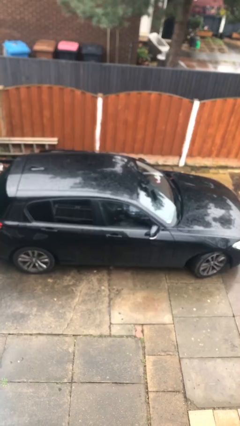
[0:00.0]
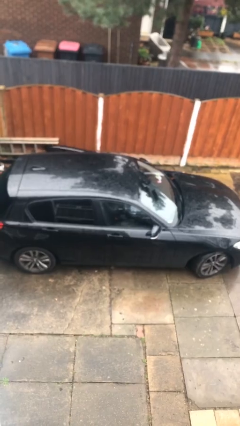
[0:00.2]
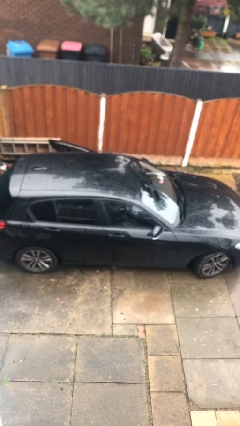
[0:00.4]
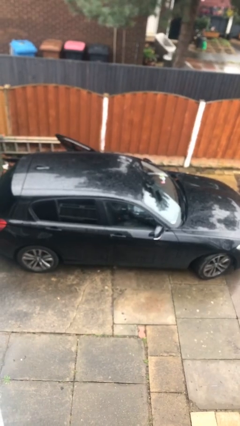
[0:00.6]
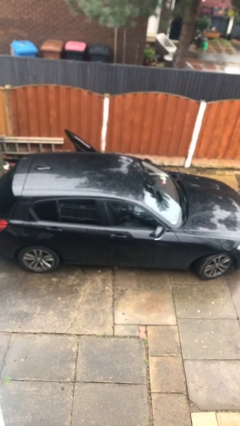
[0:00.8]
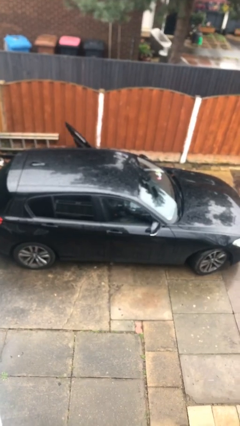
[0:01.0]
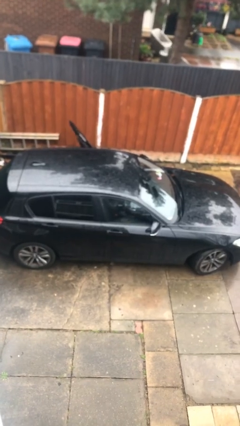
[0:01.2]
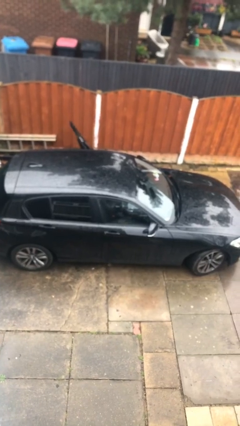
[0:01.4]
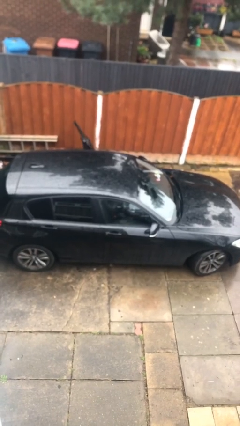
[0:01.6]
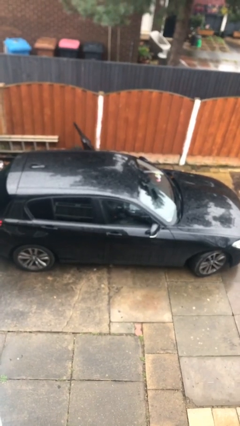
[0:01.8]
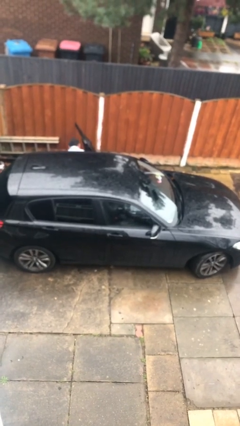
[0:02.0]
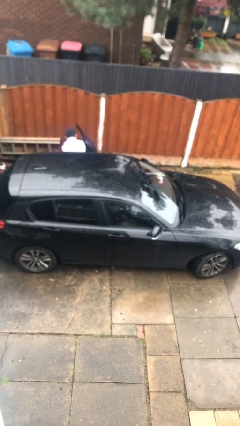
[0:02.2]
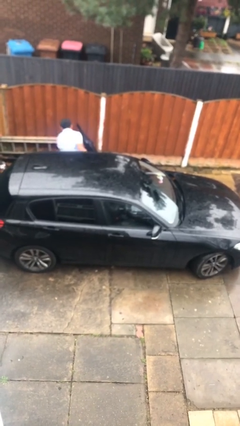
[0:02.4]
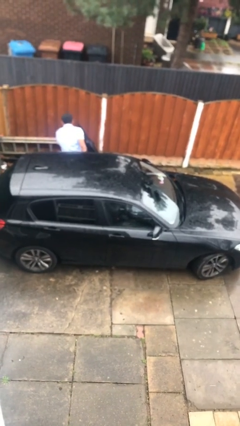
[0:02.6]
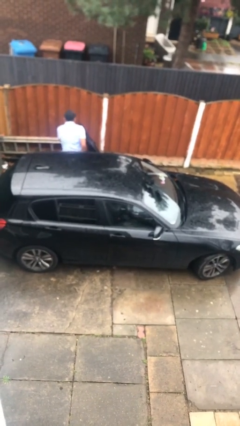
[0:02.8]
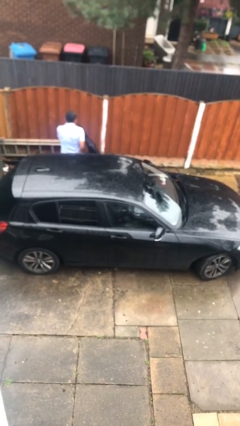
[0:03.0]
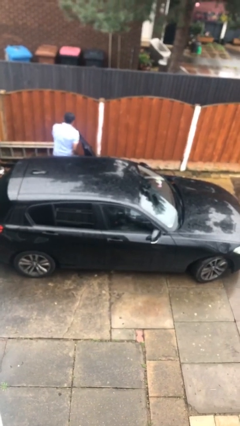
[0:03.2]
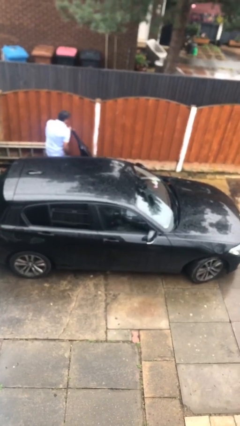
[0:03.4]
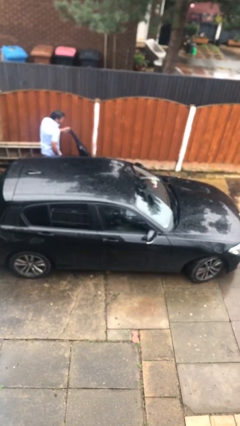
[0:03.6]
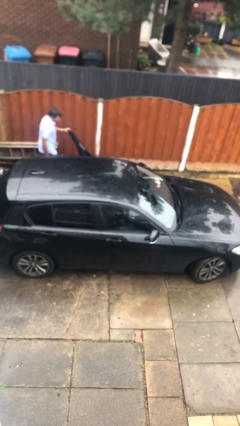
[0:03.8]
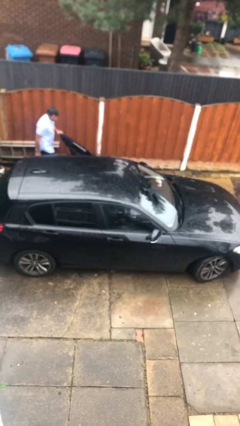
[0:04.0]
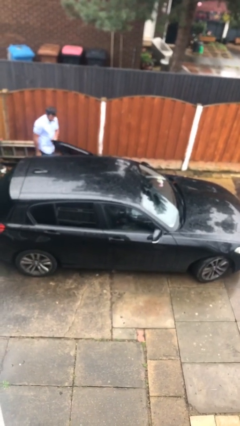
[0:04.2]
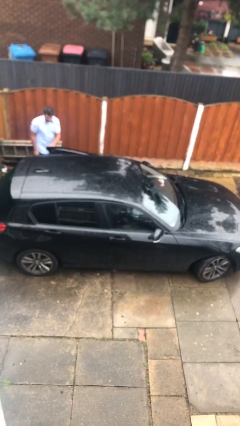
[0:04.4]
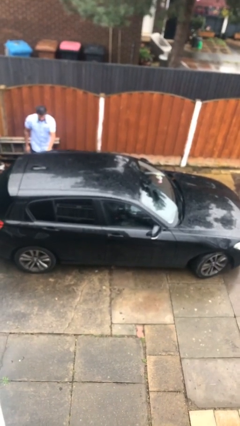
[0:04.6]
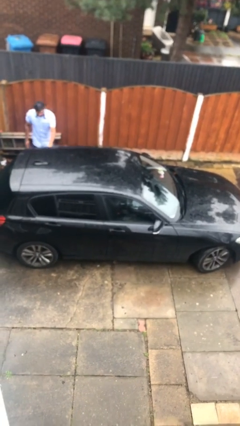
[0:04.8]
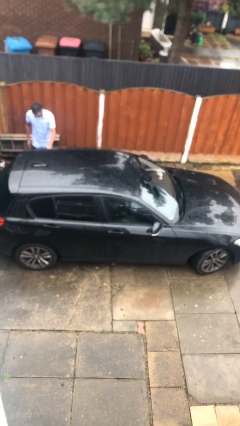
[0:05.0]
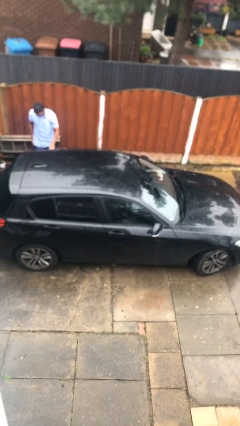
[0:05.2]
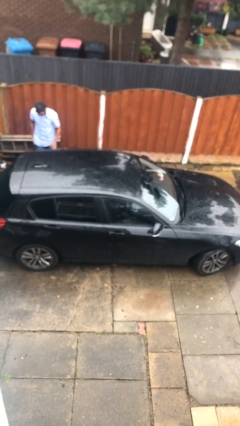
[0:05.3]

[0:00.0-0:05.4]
car drops off person

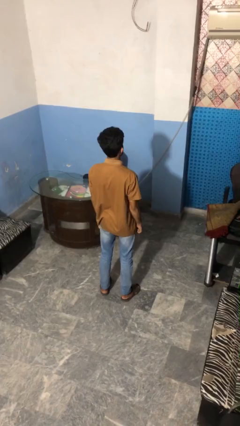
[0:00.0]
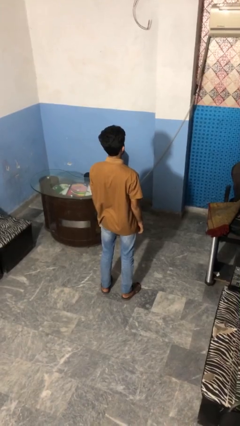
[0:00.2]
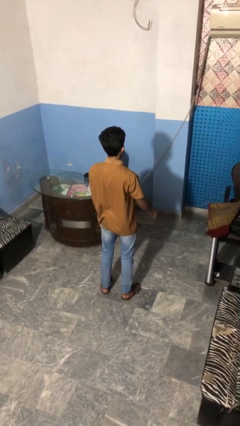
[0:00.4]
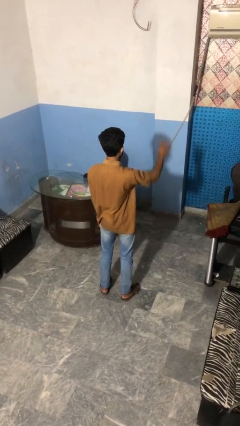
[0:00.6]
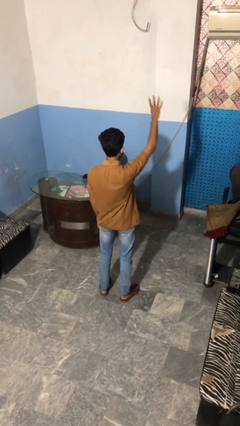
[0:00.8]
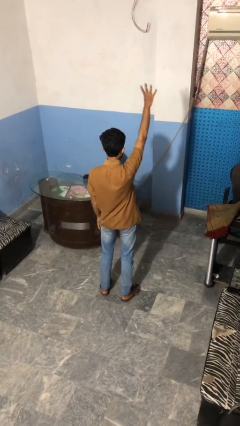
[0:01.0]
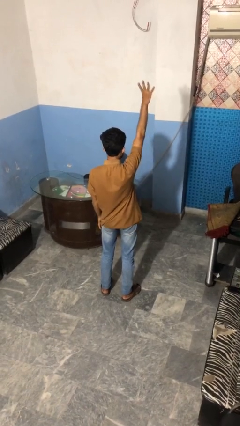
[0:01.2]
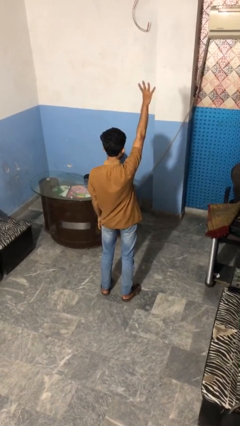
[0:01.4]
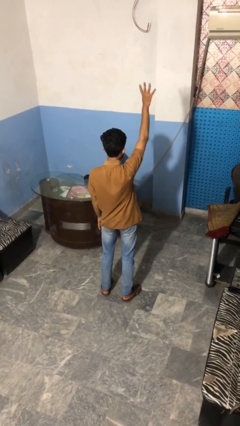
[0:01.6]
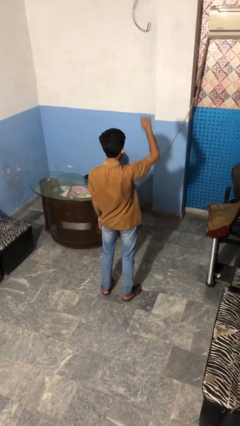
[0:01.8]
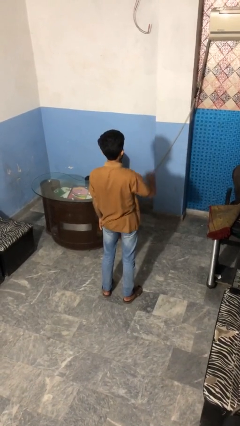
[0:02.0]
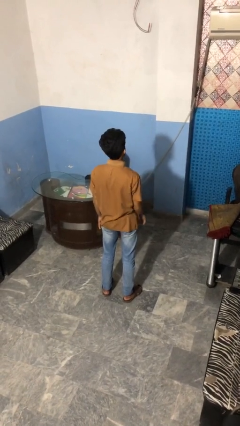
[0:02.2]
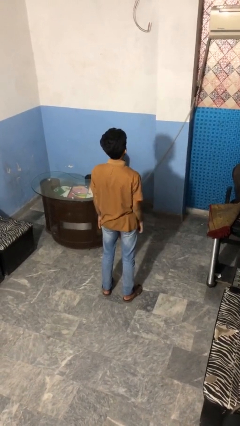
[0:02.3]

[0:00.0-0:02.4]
person gestures number four

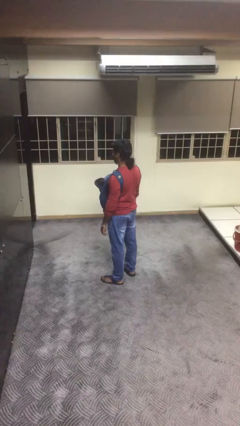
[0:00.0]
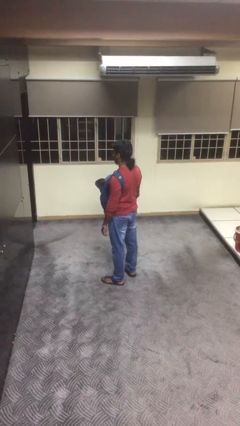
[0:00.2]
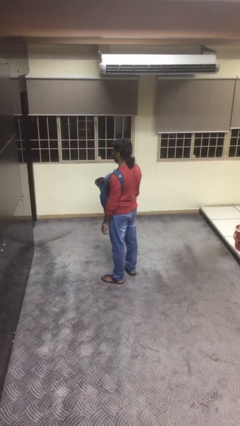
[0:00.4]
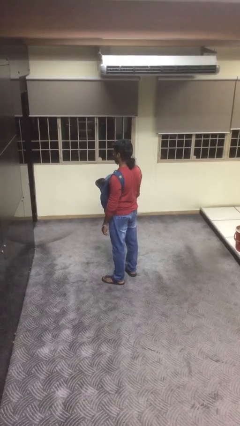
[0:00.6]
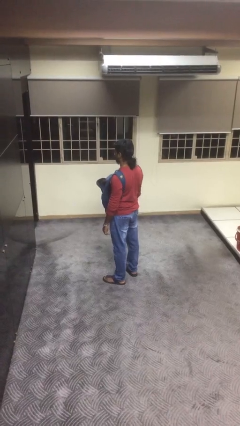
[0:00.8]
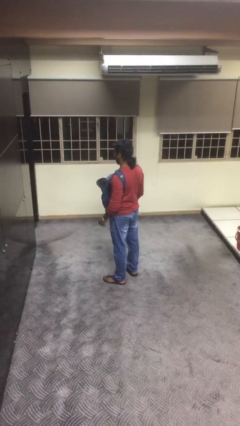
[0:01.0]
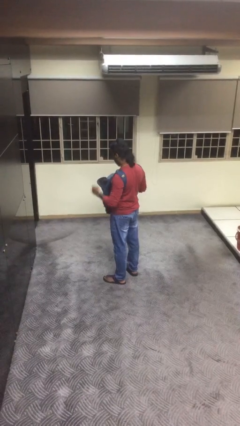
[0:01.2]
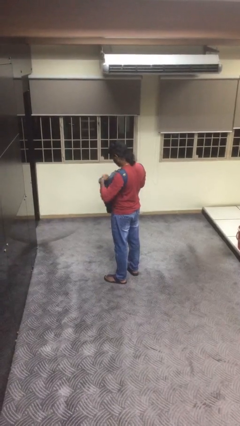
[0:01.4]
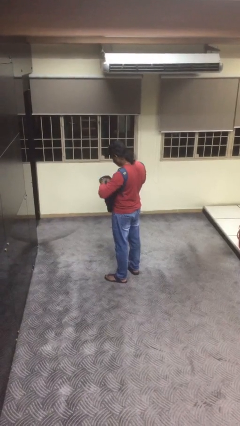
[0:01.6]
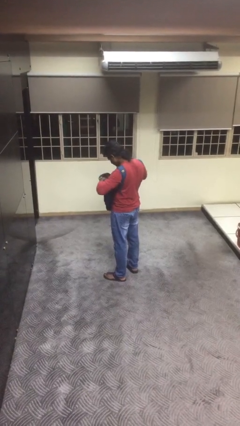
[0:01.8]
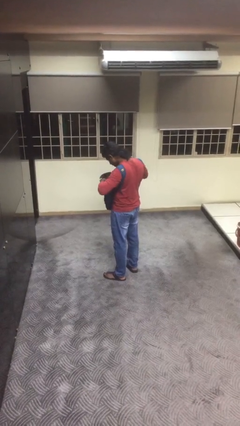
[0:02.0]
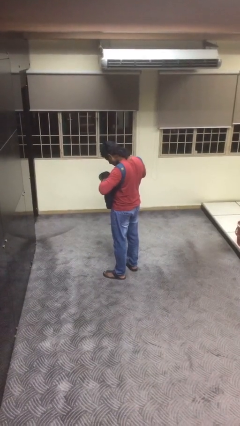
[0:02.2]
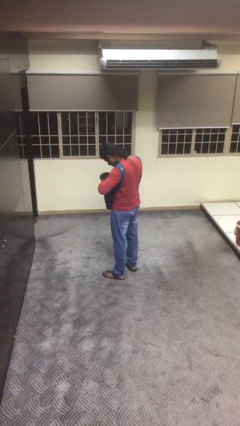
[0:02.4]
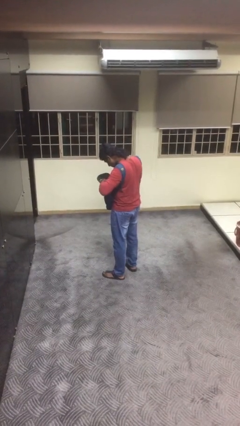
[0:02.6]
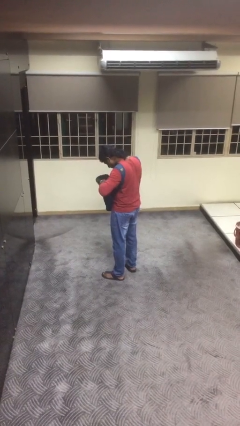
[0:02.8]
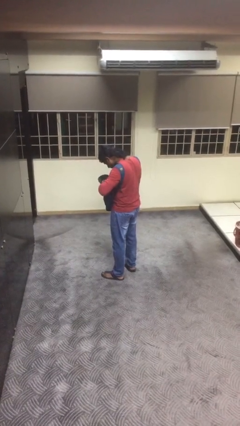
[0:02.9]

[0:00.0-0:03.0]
person searches in backpack

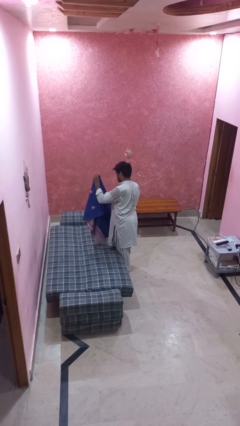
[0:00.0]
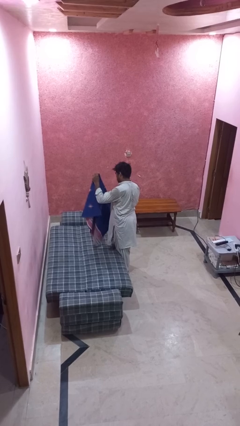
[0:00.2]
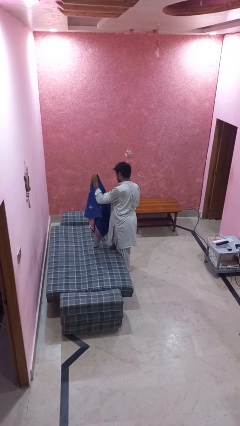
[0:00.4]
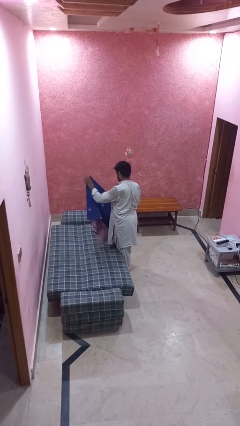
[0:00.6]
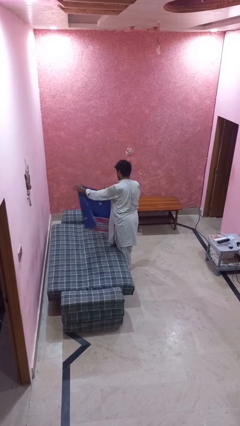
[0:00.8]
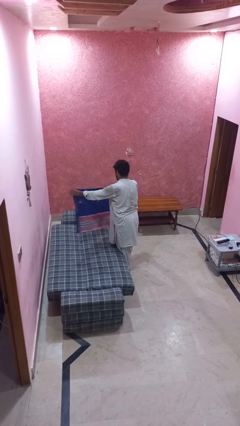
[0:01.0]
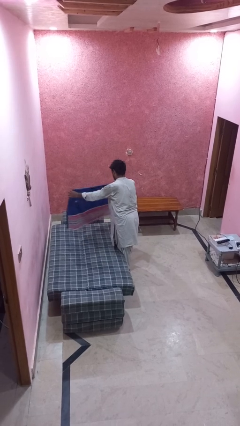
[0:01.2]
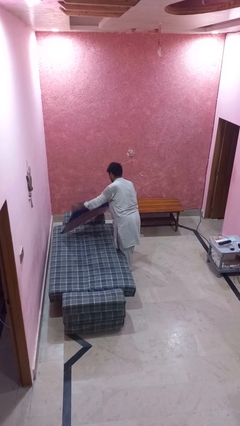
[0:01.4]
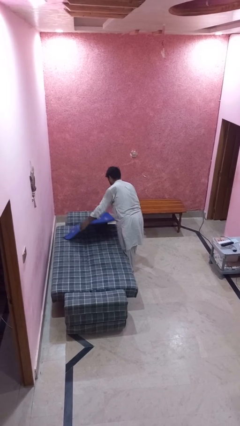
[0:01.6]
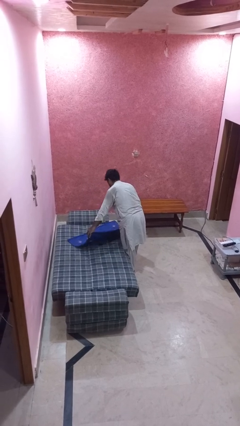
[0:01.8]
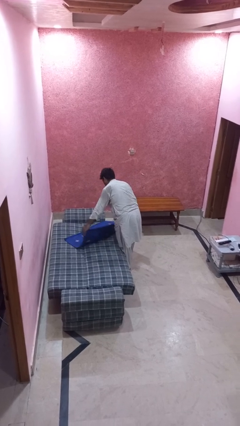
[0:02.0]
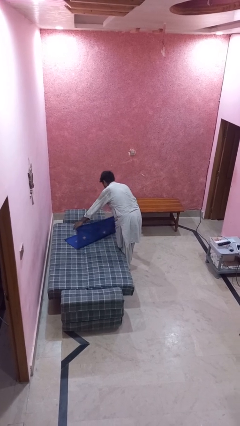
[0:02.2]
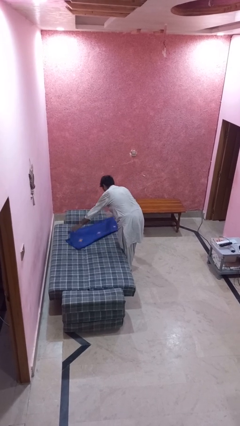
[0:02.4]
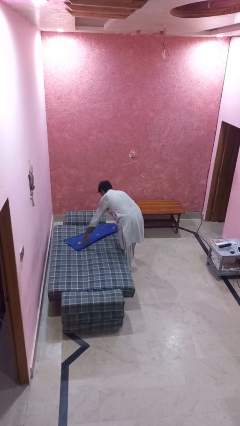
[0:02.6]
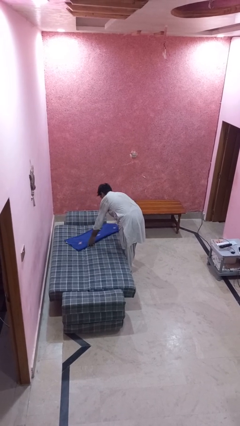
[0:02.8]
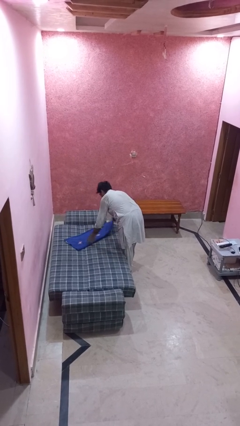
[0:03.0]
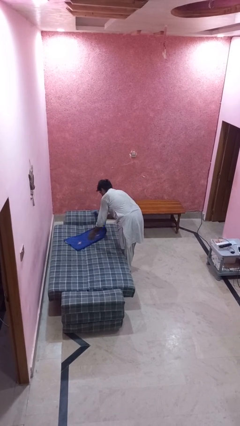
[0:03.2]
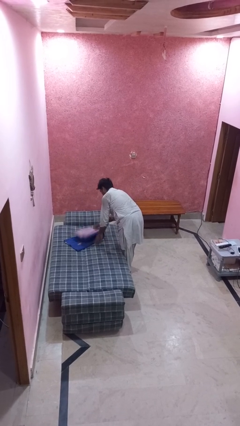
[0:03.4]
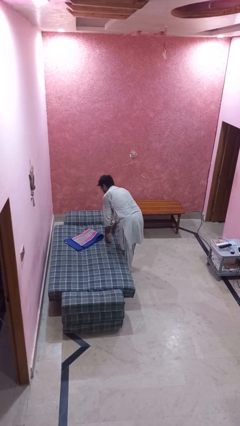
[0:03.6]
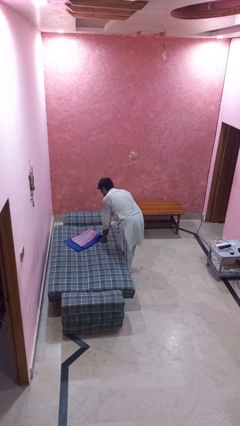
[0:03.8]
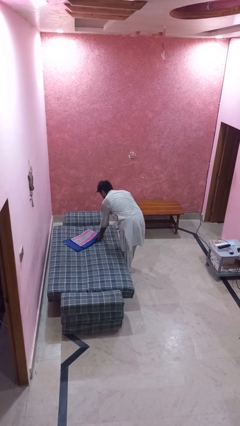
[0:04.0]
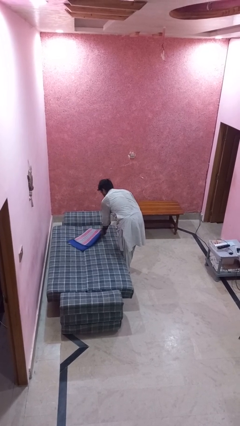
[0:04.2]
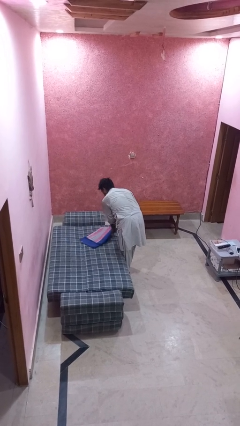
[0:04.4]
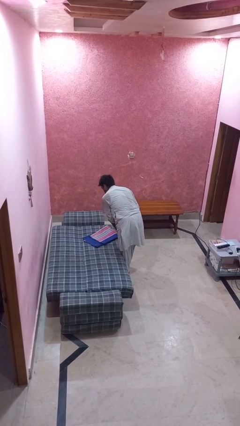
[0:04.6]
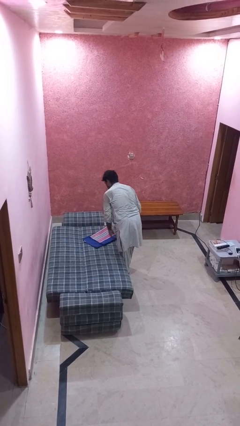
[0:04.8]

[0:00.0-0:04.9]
person folds blanket

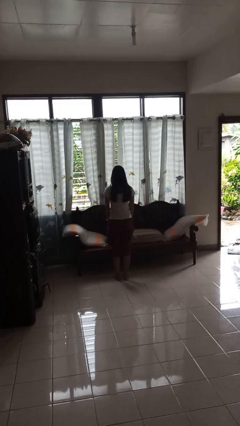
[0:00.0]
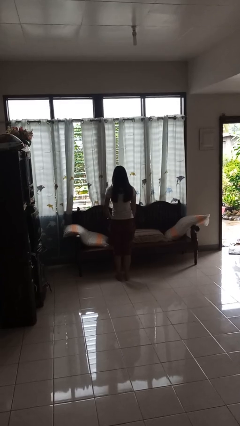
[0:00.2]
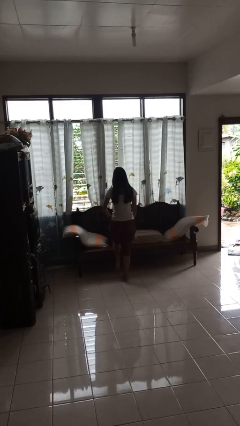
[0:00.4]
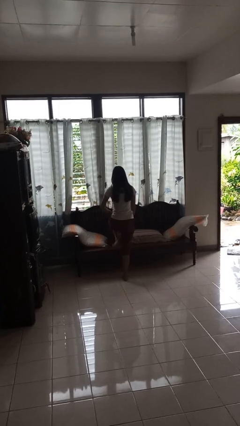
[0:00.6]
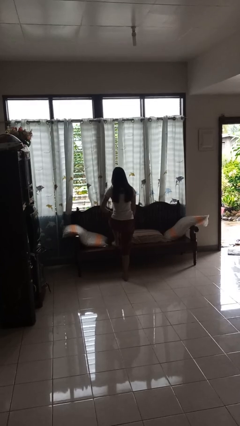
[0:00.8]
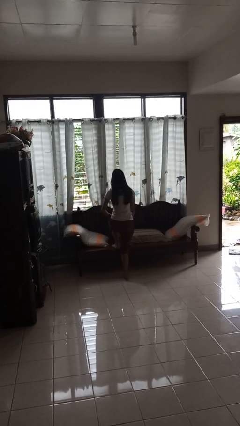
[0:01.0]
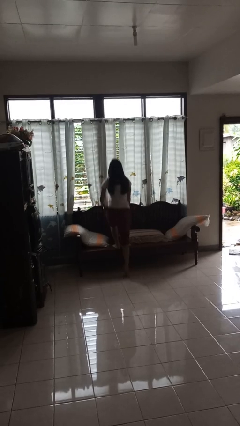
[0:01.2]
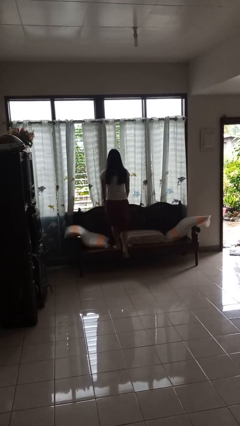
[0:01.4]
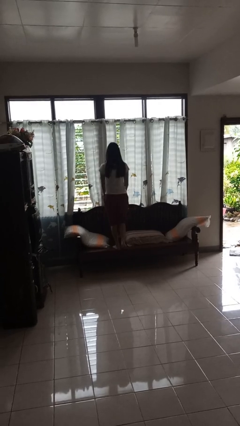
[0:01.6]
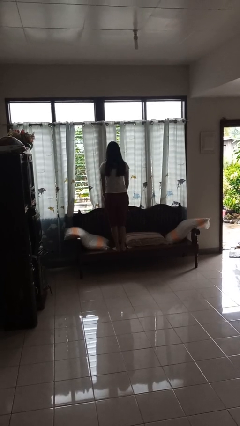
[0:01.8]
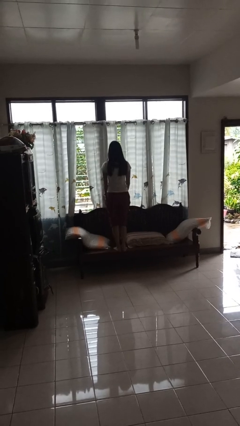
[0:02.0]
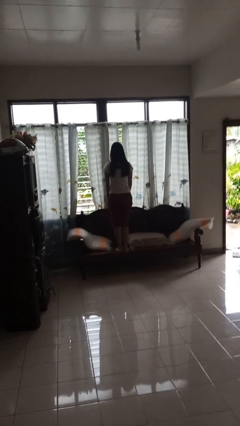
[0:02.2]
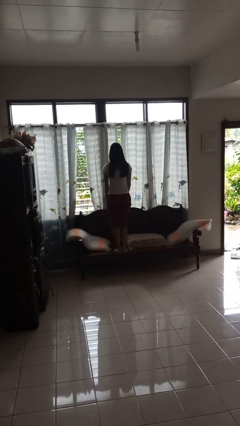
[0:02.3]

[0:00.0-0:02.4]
person climbs on couch
